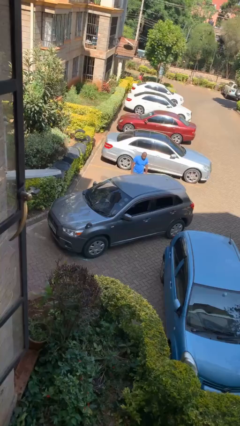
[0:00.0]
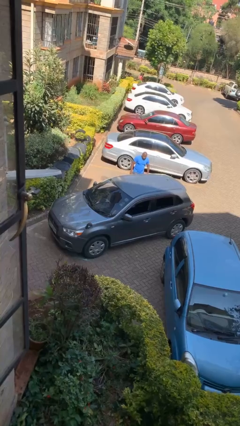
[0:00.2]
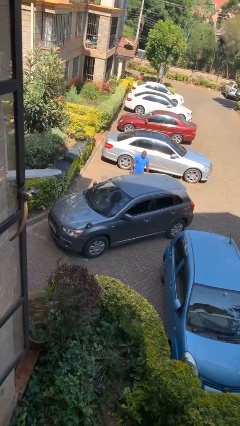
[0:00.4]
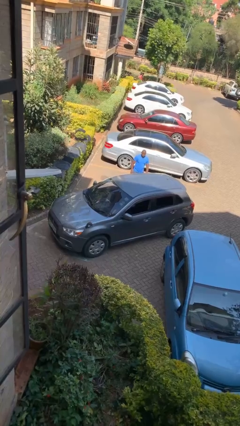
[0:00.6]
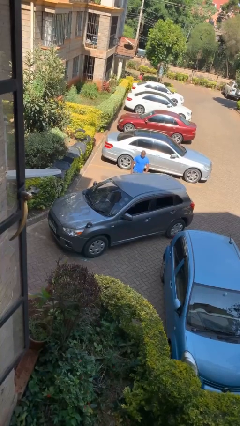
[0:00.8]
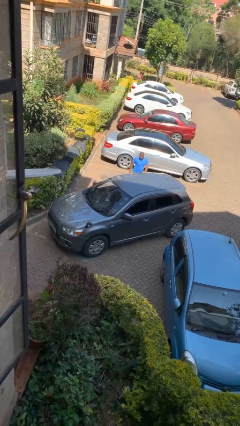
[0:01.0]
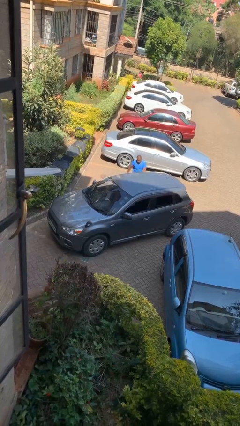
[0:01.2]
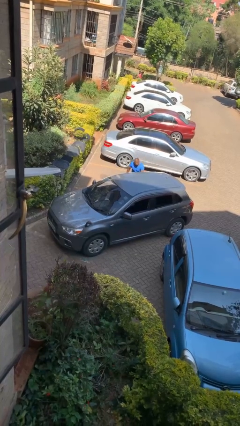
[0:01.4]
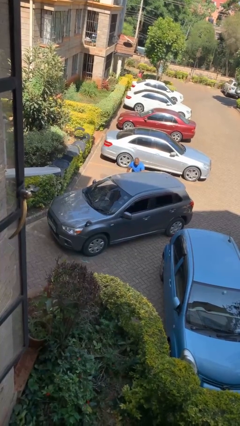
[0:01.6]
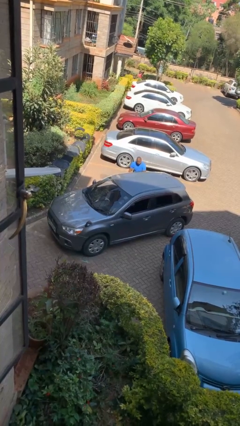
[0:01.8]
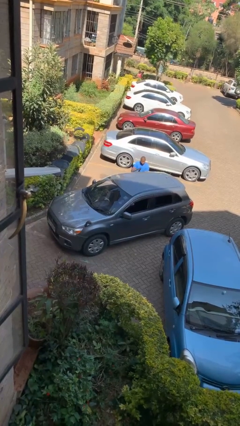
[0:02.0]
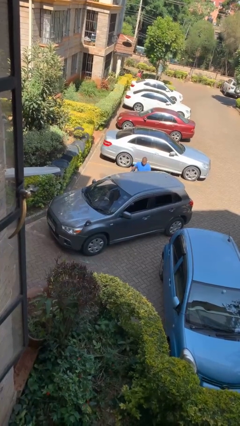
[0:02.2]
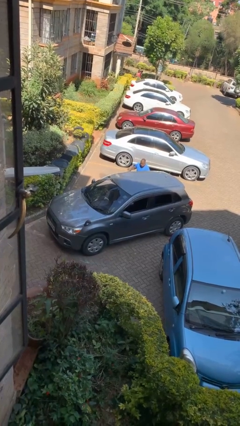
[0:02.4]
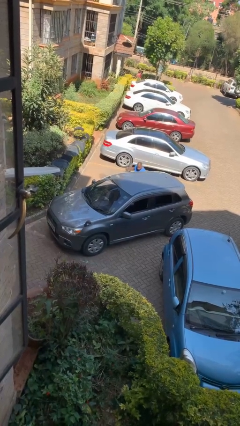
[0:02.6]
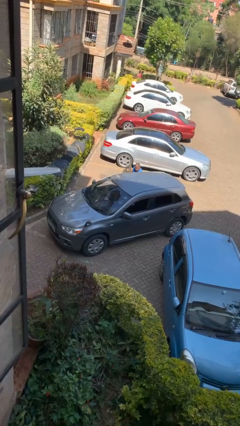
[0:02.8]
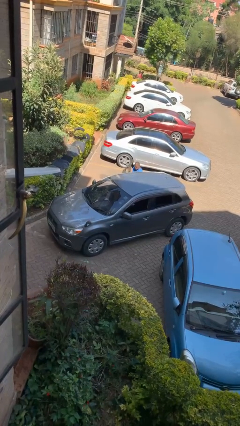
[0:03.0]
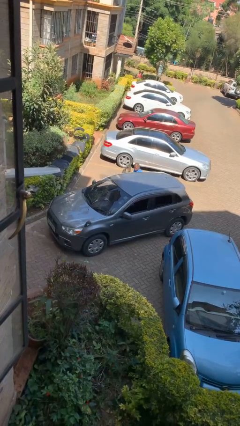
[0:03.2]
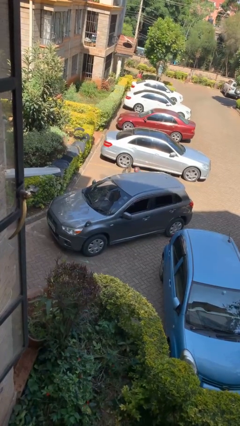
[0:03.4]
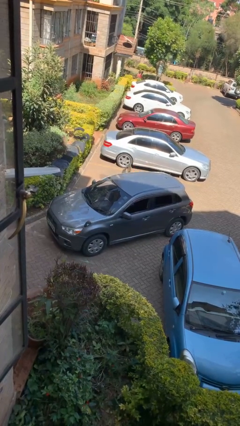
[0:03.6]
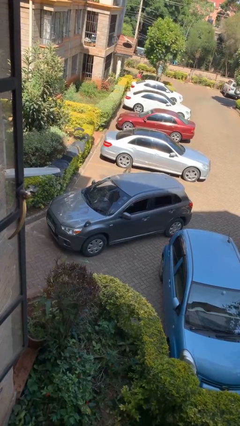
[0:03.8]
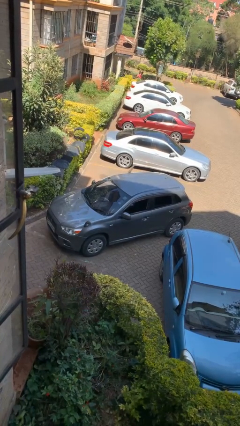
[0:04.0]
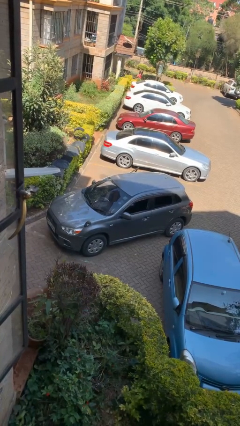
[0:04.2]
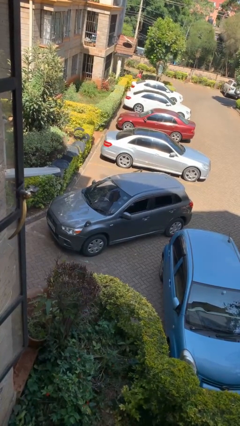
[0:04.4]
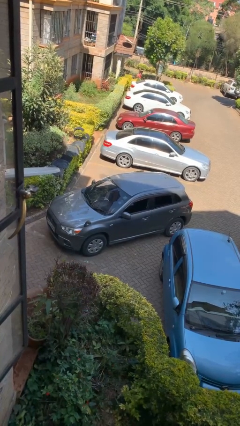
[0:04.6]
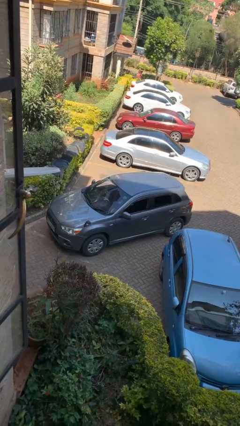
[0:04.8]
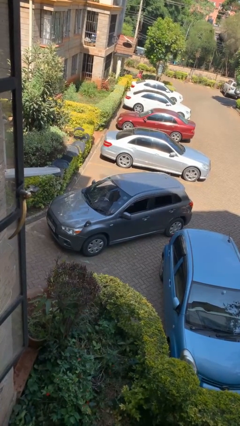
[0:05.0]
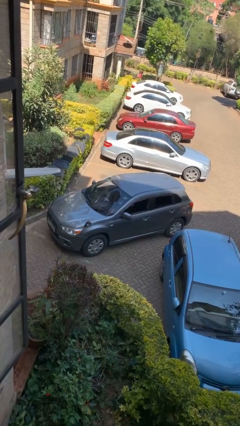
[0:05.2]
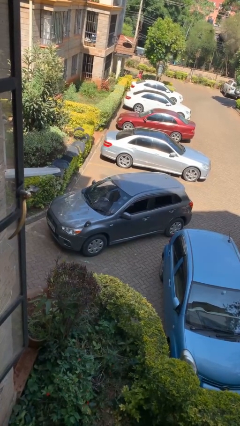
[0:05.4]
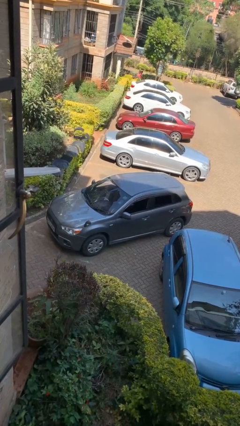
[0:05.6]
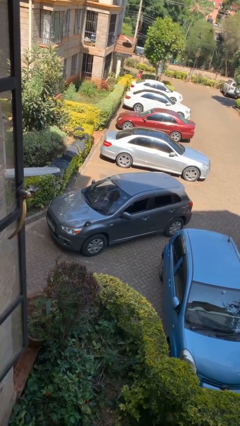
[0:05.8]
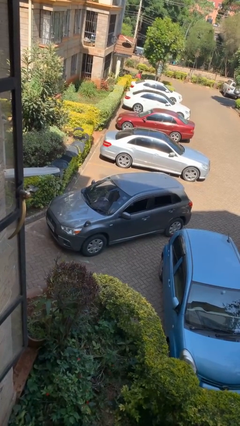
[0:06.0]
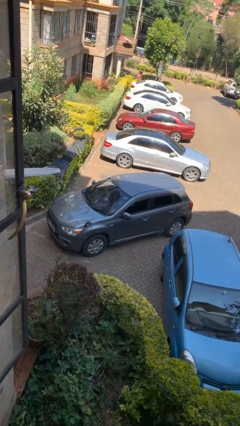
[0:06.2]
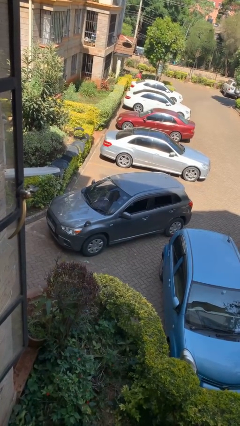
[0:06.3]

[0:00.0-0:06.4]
car picks up person

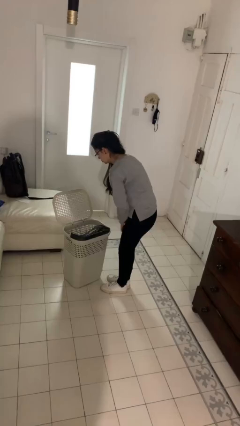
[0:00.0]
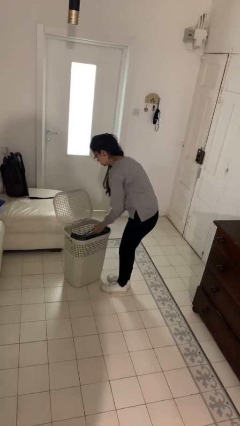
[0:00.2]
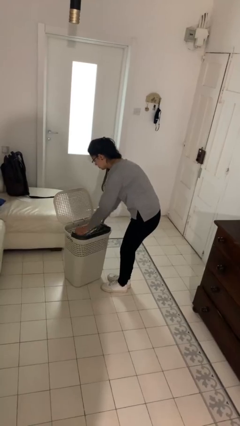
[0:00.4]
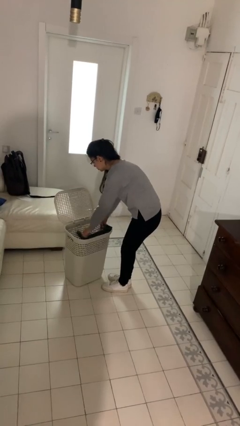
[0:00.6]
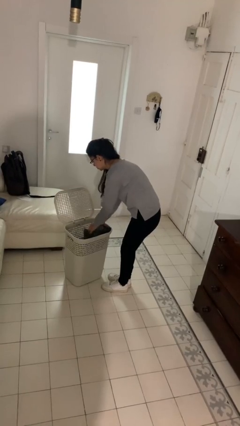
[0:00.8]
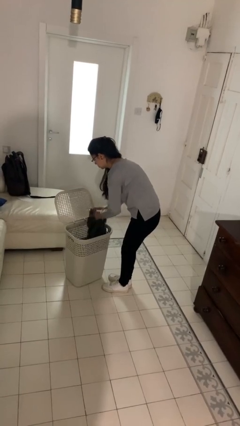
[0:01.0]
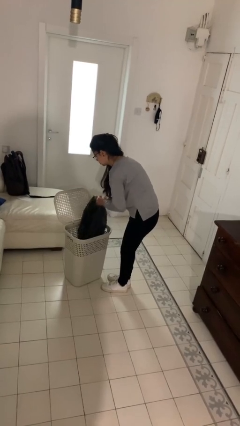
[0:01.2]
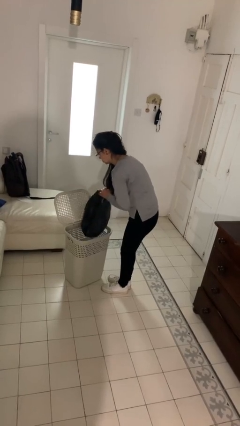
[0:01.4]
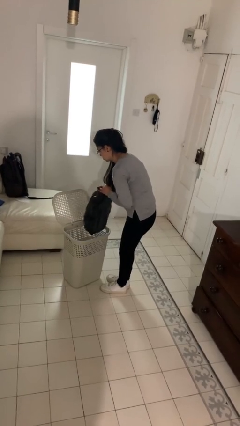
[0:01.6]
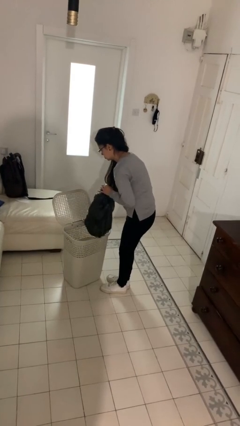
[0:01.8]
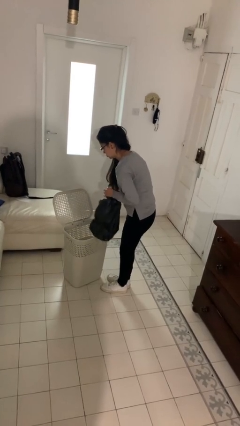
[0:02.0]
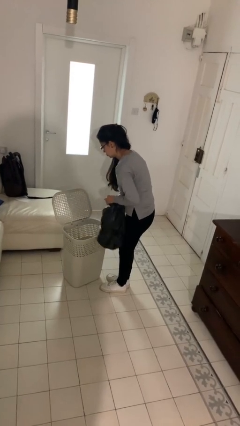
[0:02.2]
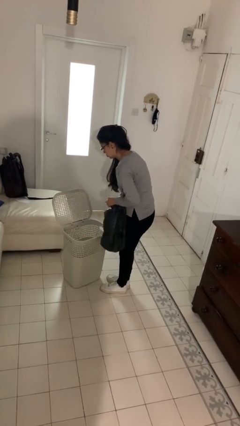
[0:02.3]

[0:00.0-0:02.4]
person removes trashbag from trashcan

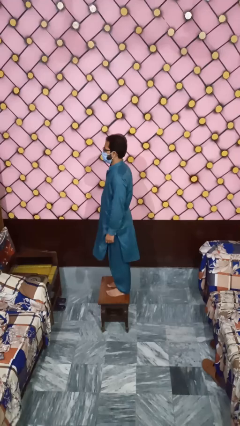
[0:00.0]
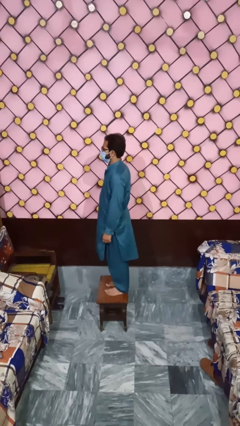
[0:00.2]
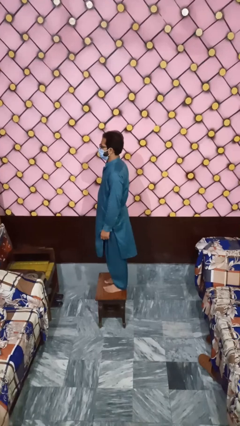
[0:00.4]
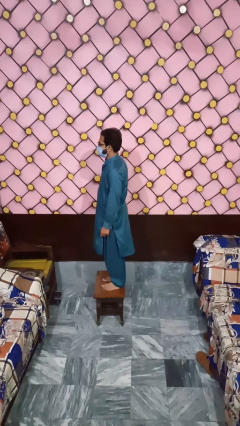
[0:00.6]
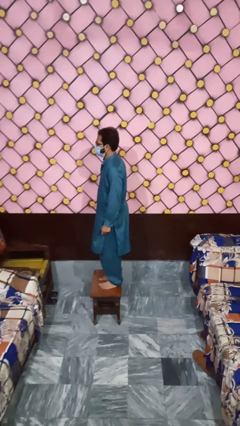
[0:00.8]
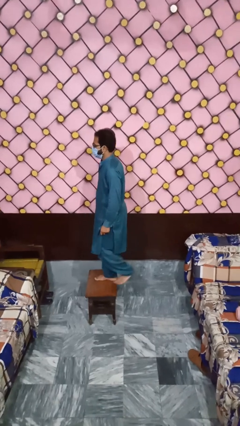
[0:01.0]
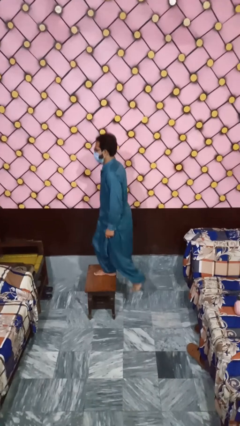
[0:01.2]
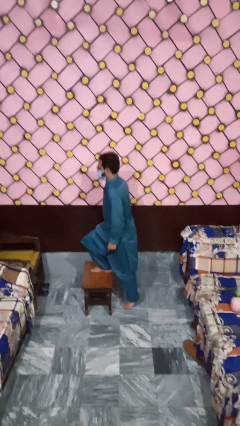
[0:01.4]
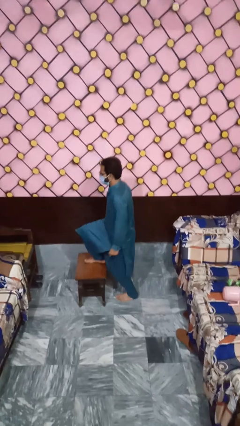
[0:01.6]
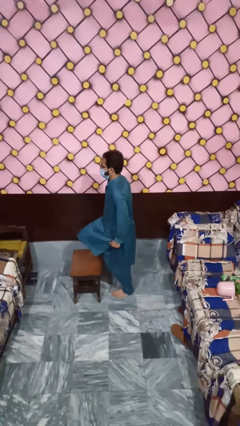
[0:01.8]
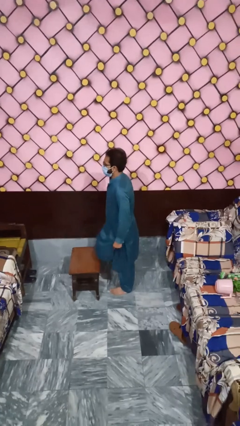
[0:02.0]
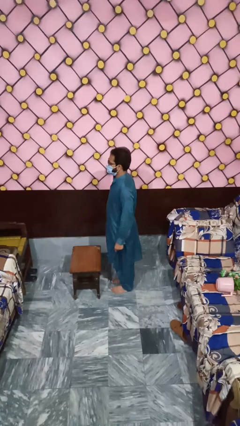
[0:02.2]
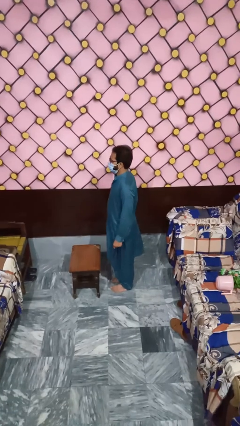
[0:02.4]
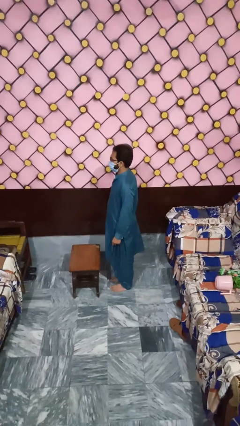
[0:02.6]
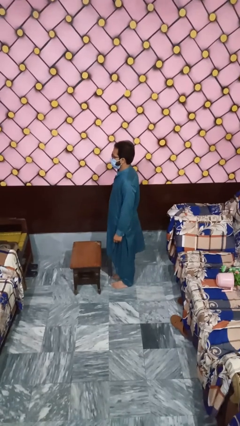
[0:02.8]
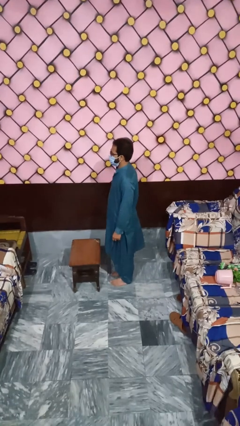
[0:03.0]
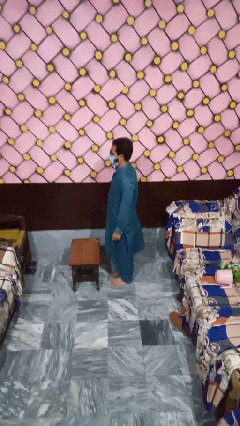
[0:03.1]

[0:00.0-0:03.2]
person climbs off table

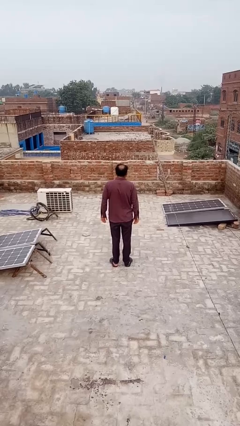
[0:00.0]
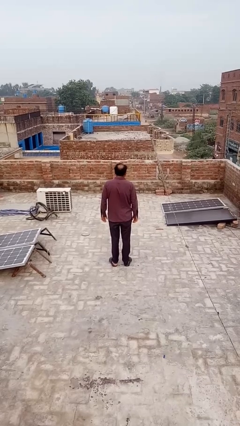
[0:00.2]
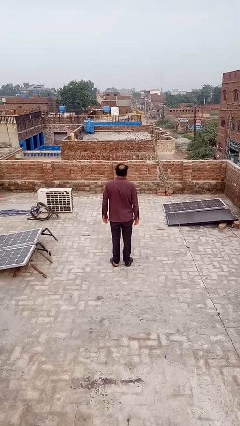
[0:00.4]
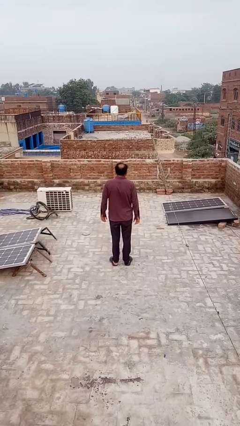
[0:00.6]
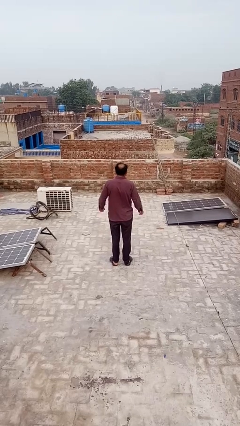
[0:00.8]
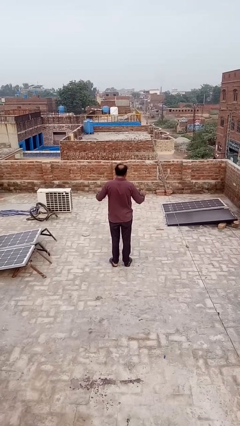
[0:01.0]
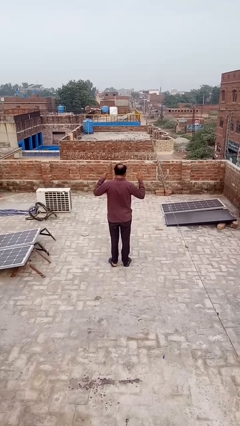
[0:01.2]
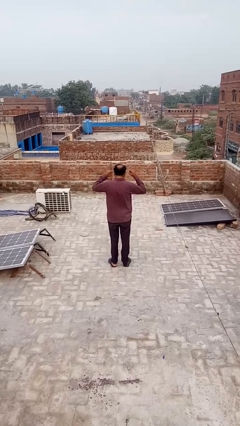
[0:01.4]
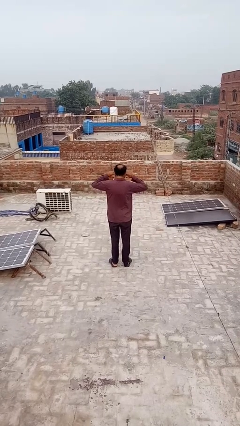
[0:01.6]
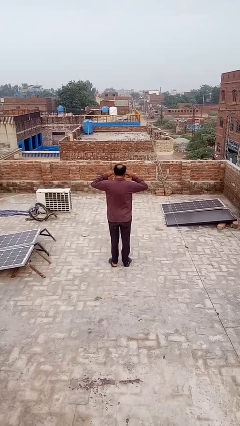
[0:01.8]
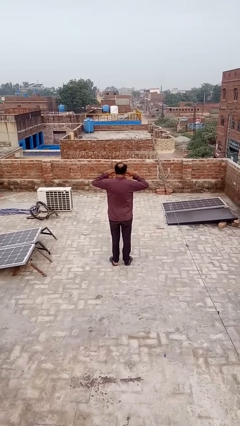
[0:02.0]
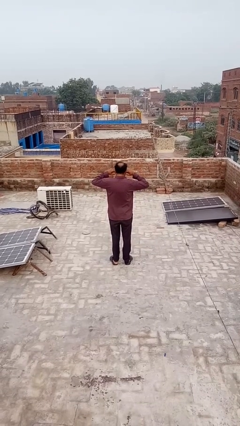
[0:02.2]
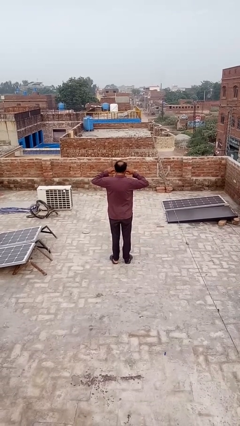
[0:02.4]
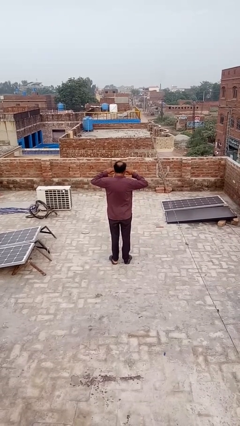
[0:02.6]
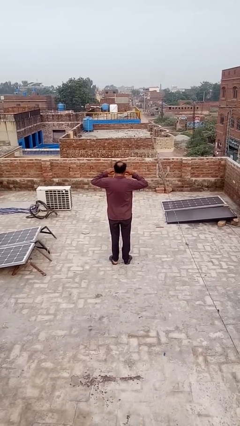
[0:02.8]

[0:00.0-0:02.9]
person puts fingers in ear

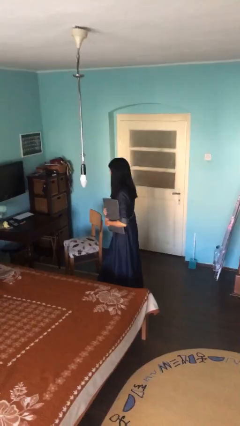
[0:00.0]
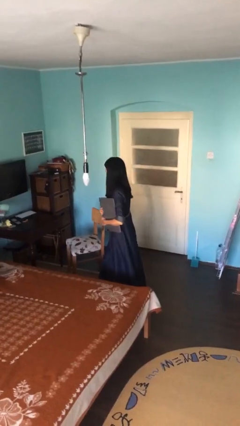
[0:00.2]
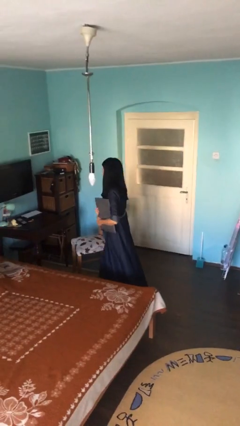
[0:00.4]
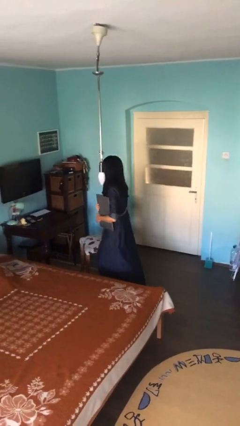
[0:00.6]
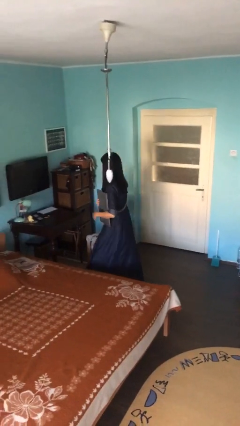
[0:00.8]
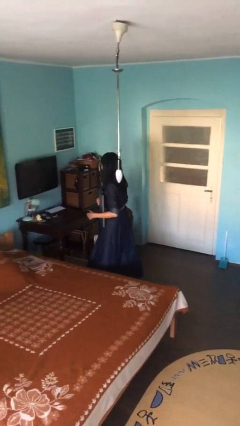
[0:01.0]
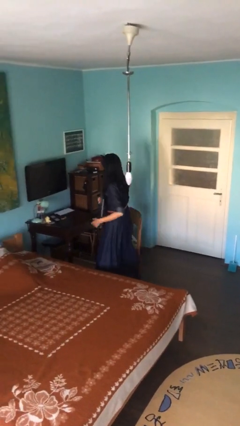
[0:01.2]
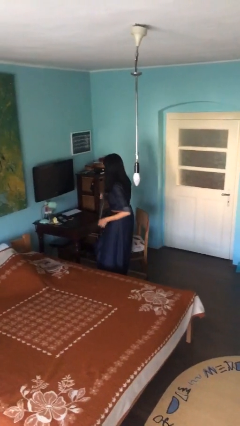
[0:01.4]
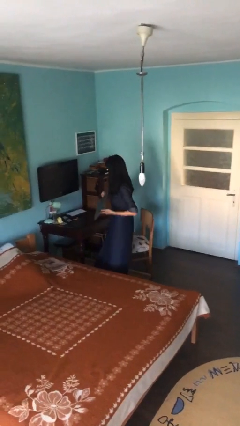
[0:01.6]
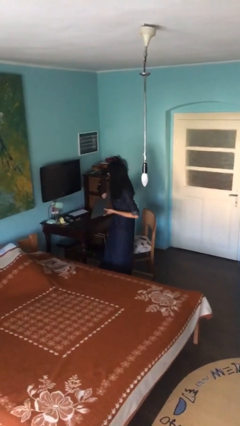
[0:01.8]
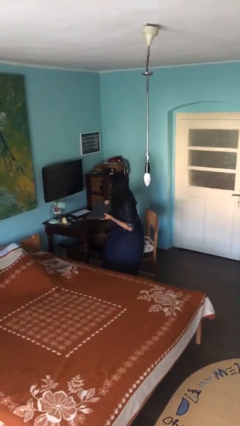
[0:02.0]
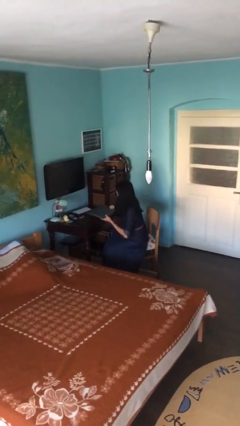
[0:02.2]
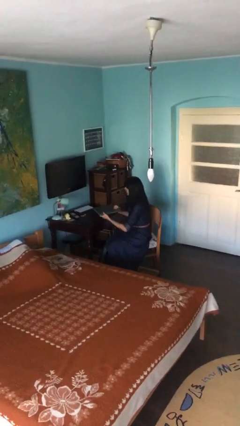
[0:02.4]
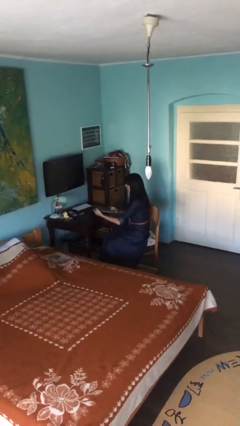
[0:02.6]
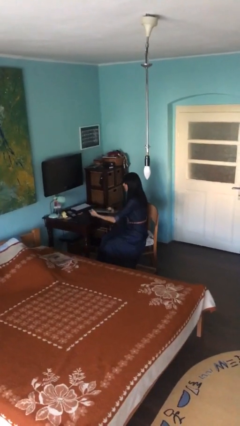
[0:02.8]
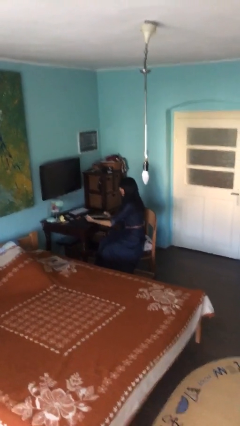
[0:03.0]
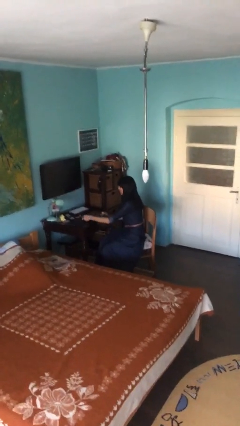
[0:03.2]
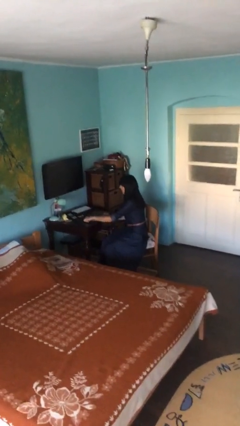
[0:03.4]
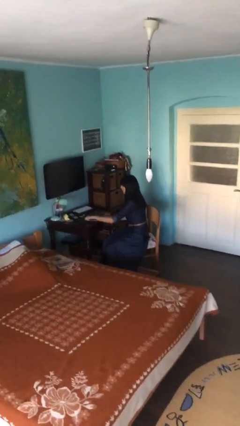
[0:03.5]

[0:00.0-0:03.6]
person sits down
